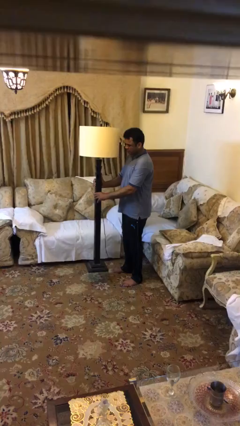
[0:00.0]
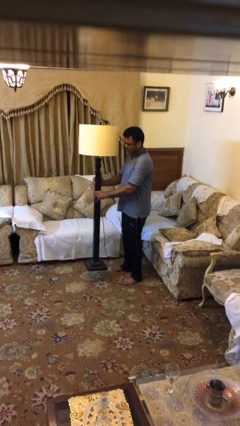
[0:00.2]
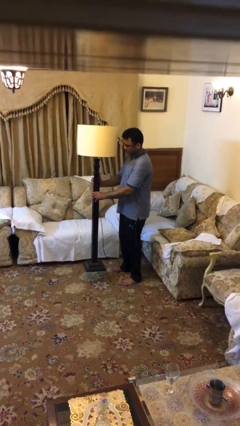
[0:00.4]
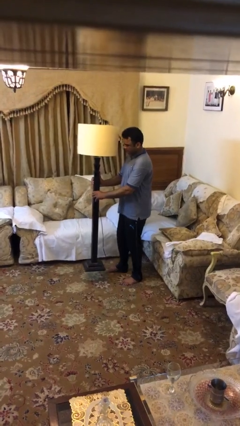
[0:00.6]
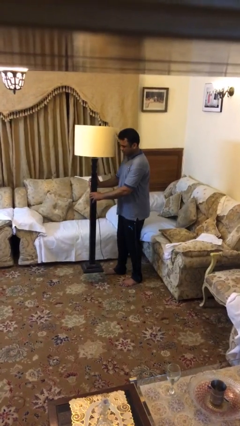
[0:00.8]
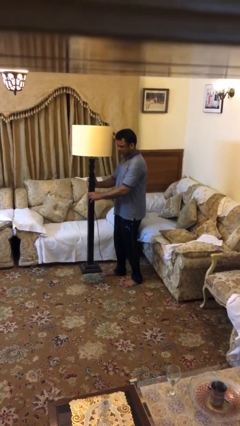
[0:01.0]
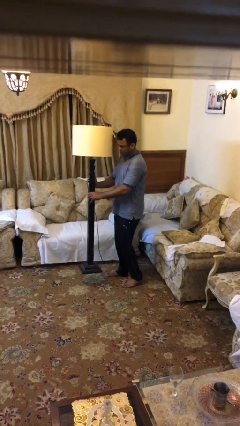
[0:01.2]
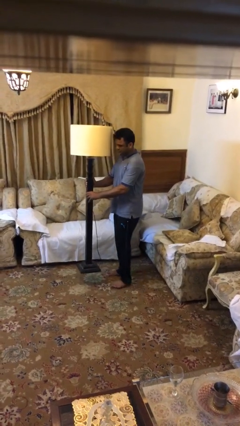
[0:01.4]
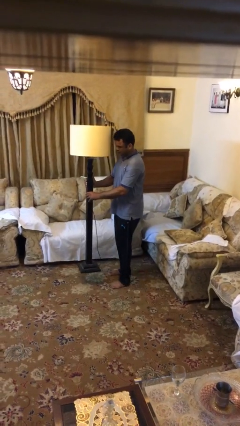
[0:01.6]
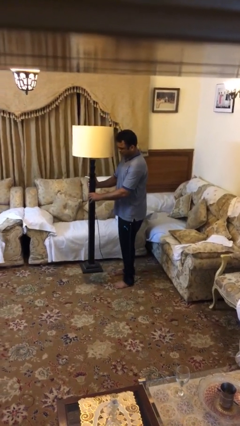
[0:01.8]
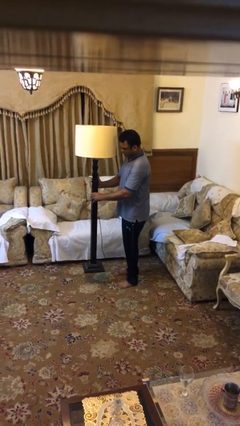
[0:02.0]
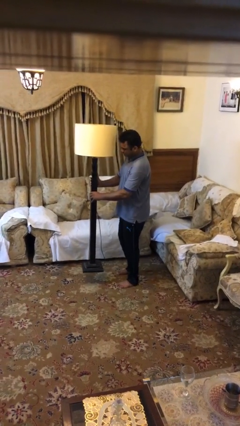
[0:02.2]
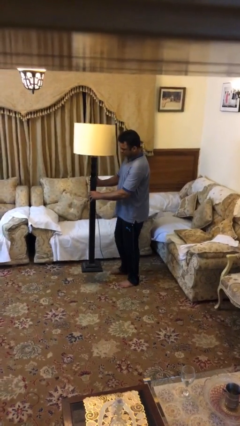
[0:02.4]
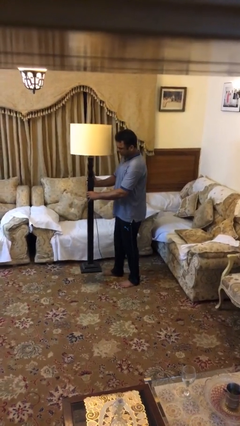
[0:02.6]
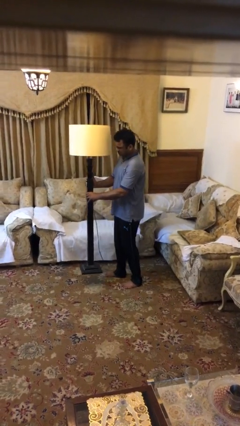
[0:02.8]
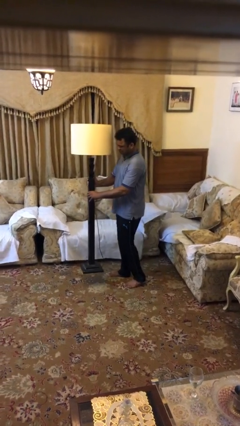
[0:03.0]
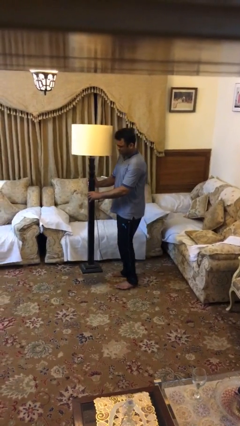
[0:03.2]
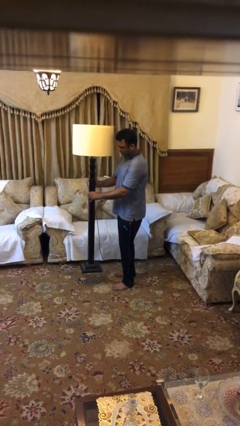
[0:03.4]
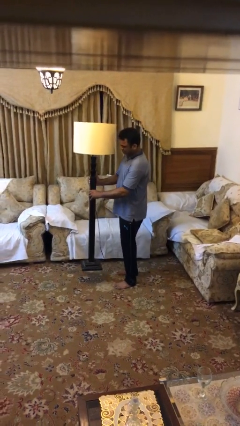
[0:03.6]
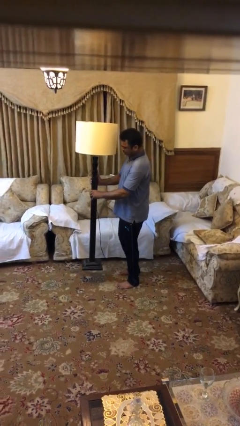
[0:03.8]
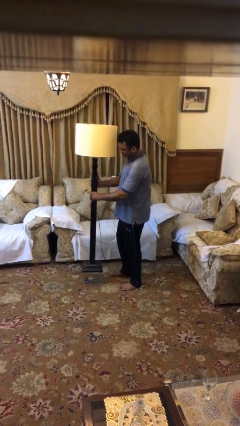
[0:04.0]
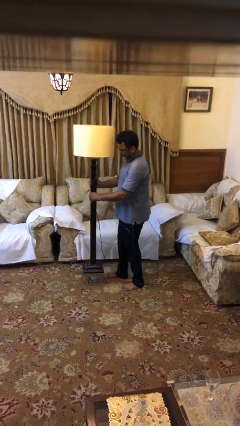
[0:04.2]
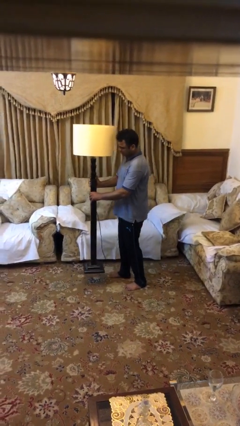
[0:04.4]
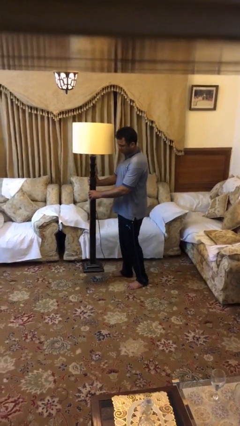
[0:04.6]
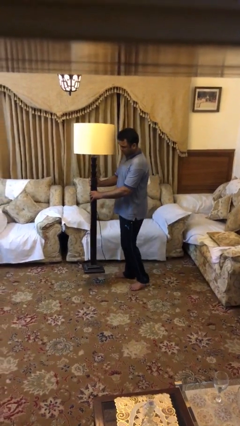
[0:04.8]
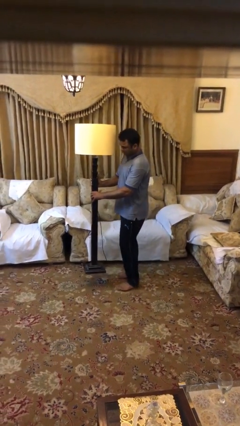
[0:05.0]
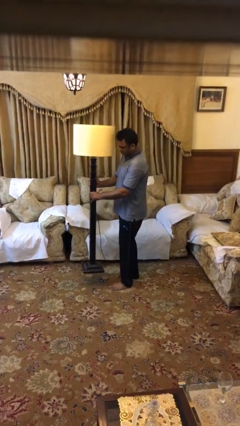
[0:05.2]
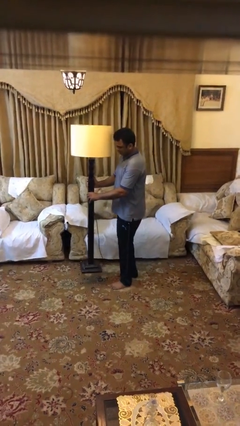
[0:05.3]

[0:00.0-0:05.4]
person carries heavy object

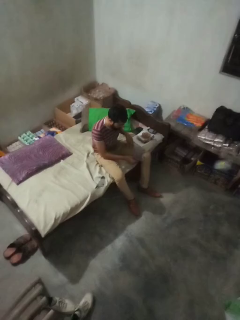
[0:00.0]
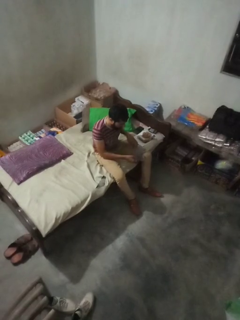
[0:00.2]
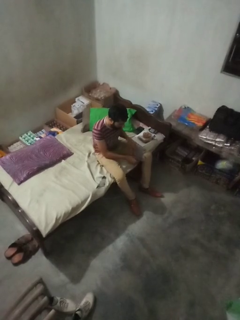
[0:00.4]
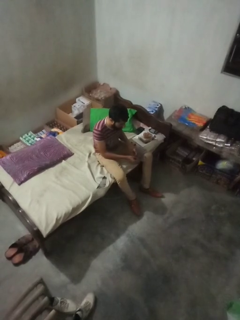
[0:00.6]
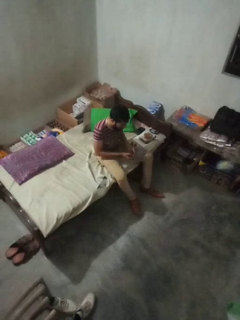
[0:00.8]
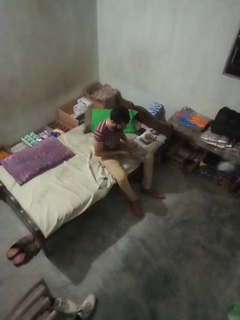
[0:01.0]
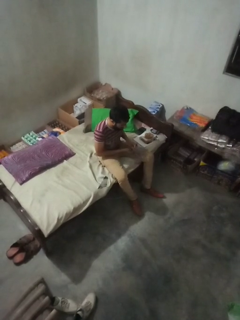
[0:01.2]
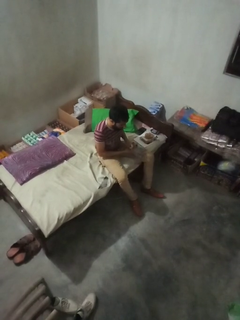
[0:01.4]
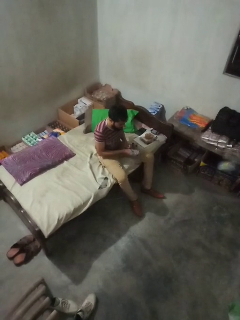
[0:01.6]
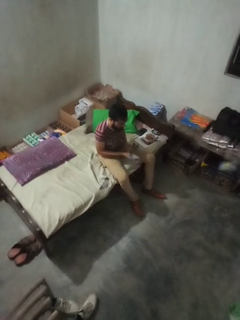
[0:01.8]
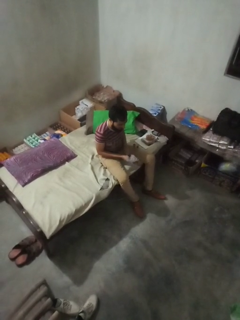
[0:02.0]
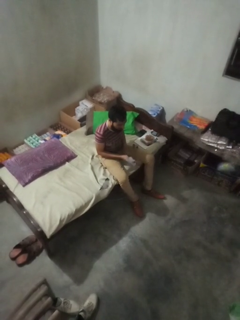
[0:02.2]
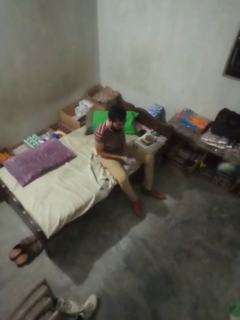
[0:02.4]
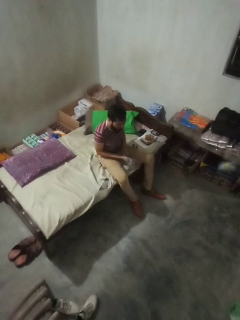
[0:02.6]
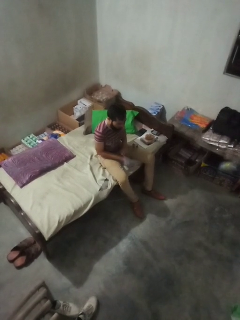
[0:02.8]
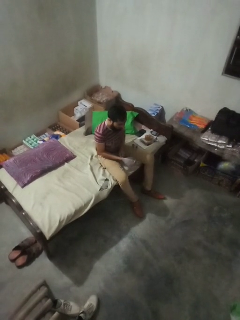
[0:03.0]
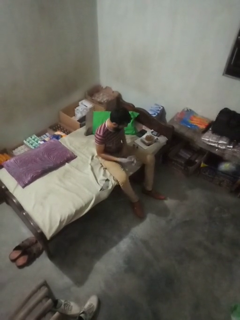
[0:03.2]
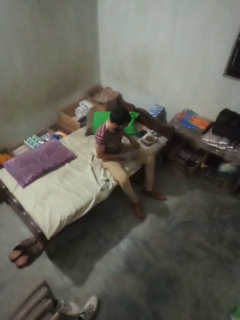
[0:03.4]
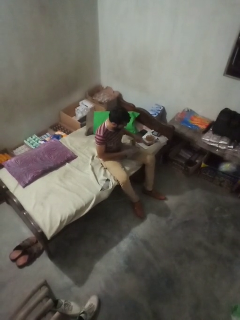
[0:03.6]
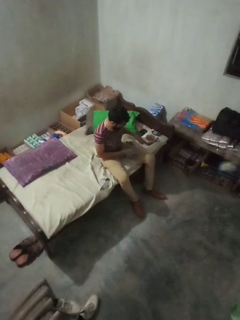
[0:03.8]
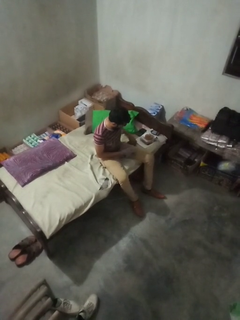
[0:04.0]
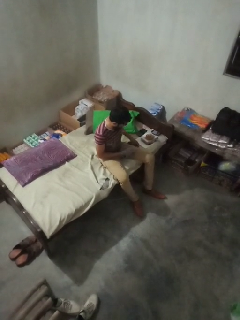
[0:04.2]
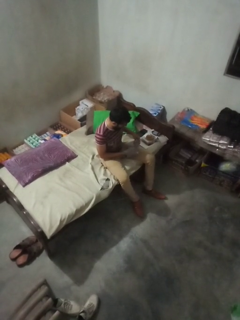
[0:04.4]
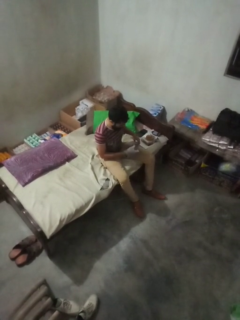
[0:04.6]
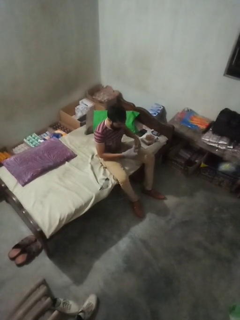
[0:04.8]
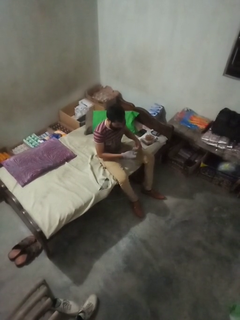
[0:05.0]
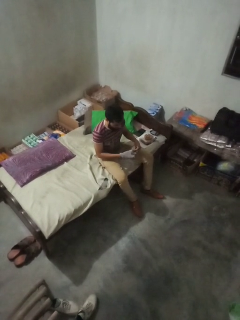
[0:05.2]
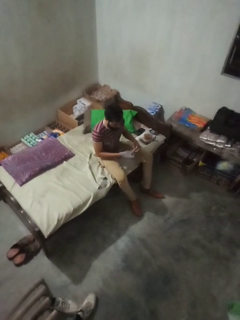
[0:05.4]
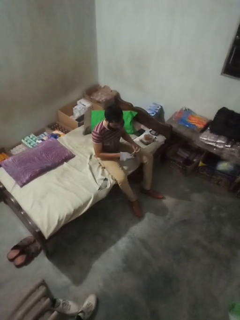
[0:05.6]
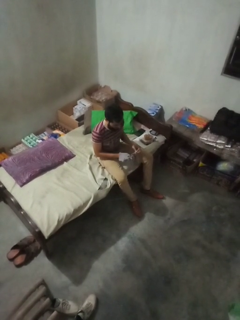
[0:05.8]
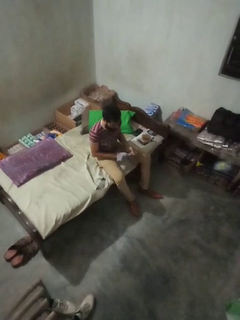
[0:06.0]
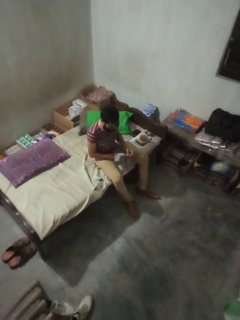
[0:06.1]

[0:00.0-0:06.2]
person puts on gloves

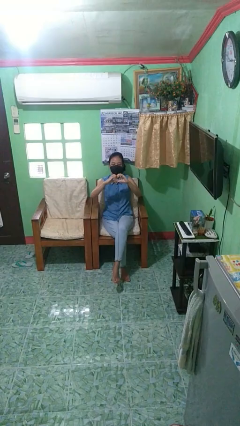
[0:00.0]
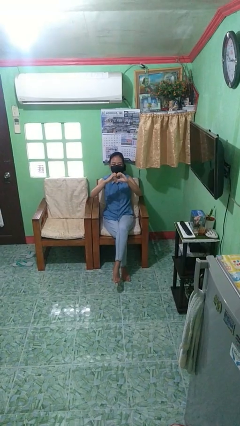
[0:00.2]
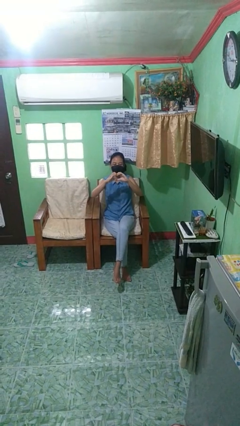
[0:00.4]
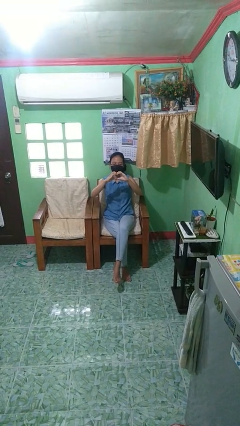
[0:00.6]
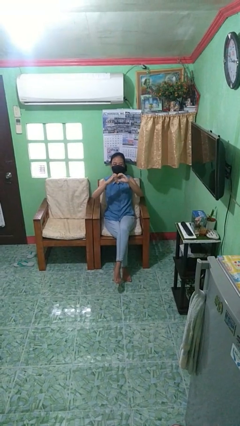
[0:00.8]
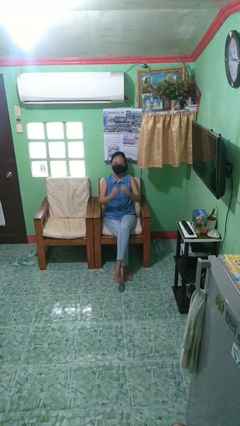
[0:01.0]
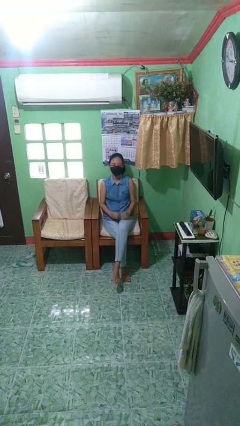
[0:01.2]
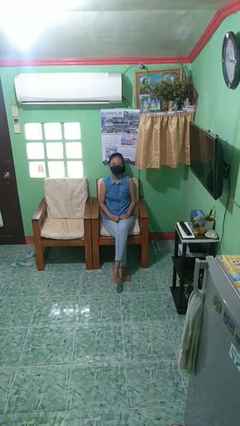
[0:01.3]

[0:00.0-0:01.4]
person gestures heart

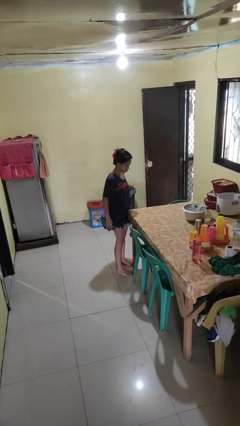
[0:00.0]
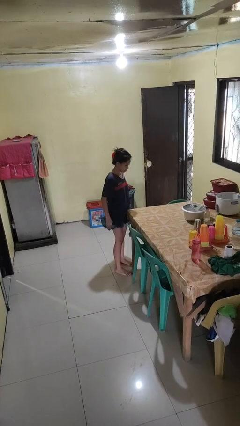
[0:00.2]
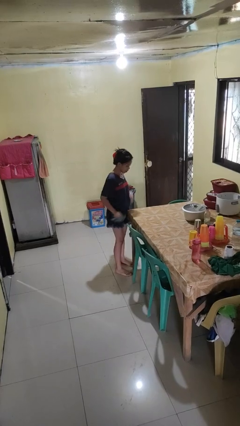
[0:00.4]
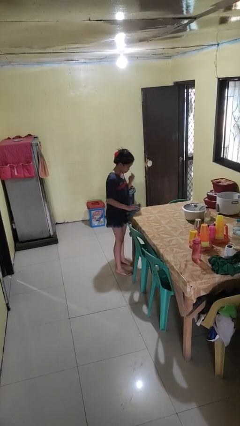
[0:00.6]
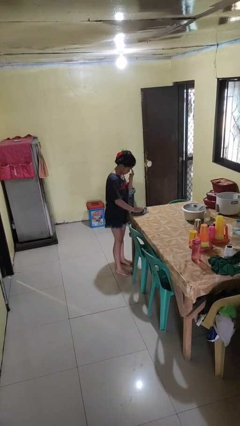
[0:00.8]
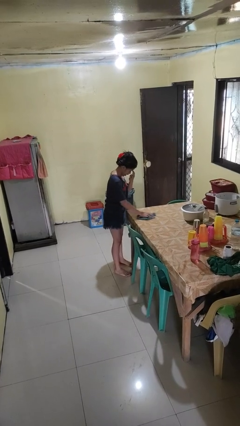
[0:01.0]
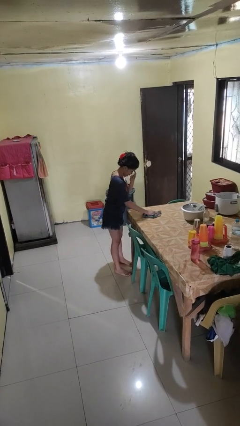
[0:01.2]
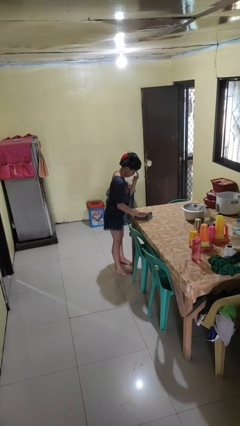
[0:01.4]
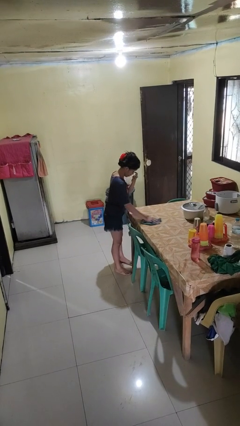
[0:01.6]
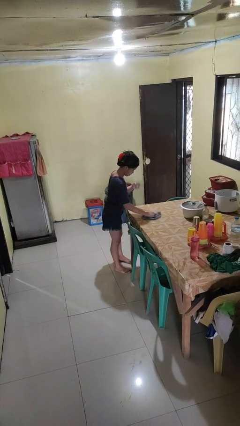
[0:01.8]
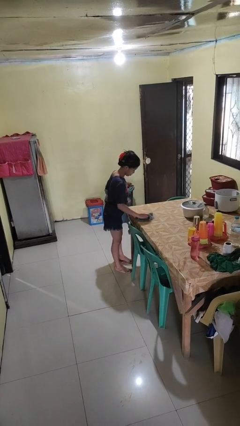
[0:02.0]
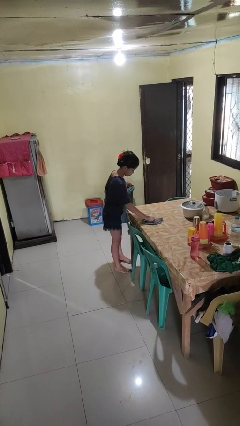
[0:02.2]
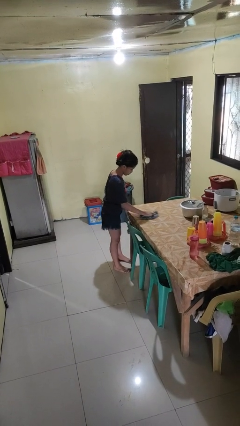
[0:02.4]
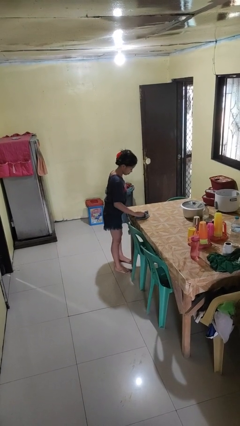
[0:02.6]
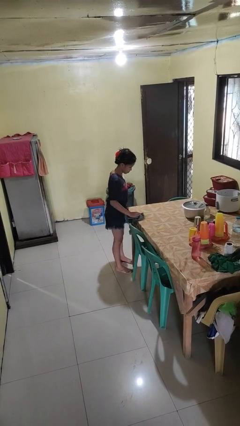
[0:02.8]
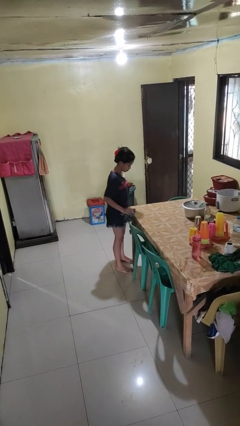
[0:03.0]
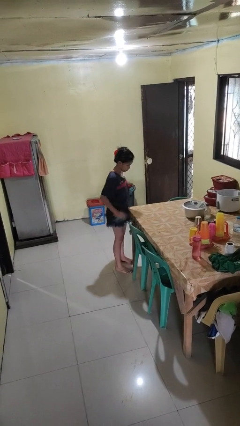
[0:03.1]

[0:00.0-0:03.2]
person cleans table with rag

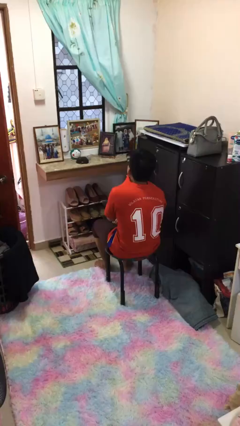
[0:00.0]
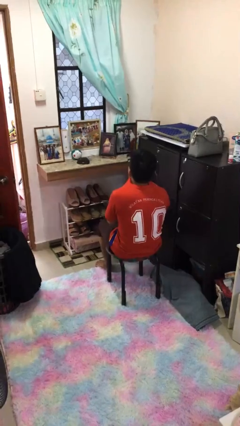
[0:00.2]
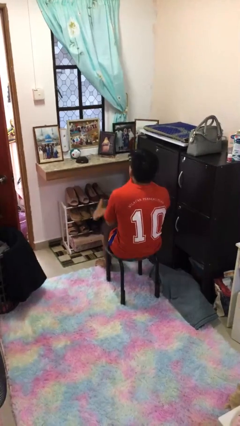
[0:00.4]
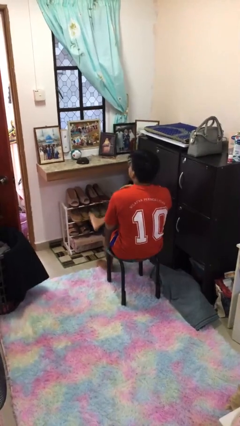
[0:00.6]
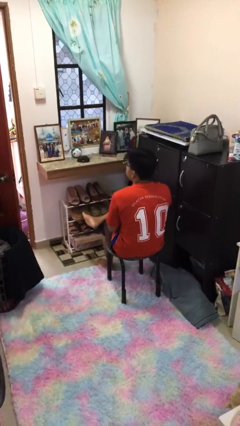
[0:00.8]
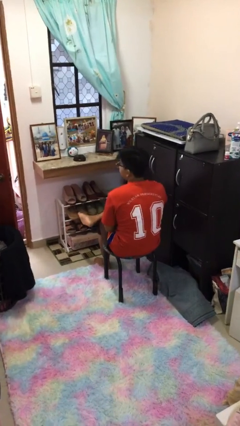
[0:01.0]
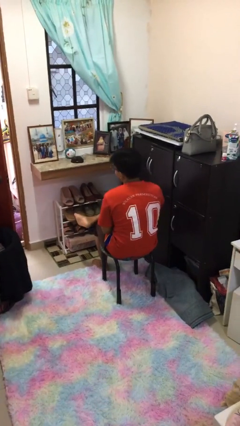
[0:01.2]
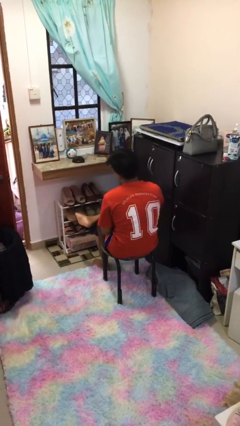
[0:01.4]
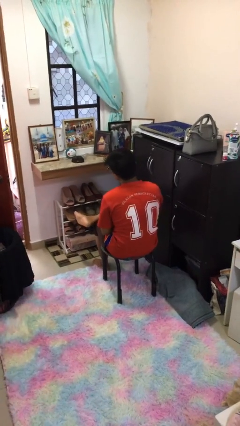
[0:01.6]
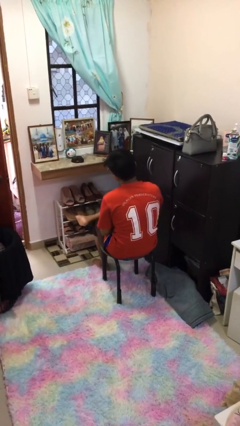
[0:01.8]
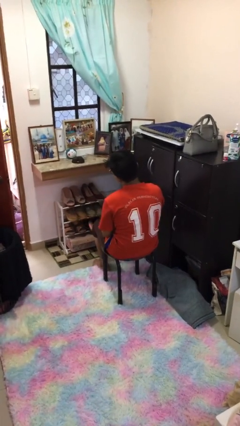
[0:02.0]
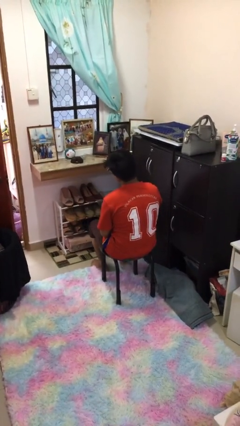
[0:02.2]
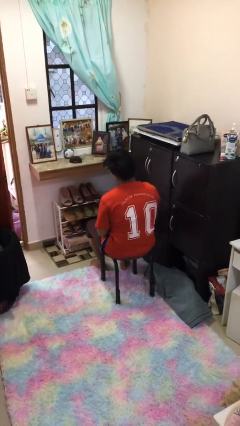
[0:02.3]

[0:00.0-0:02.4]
person crosses legs

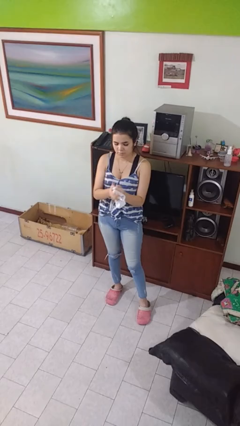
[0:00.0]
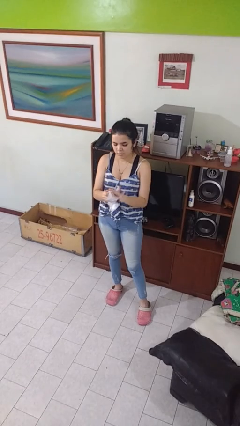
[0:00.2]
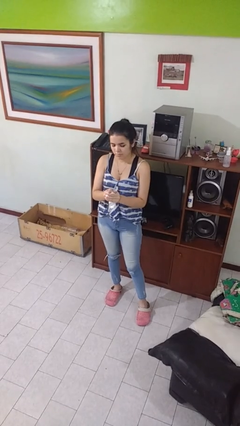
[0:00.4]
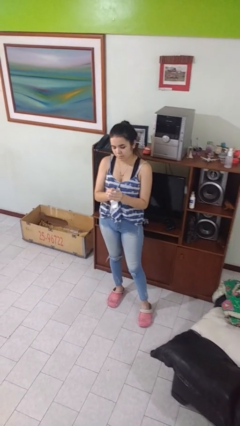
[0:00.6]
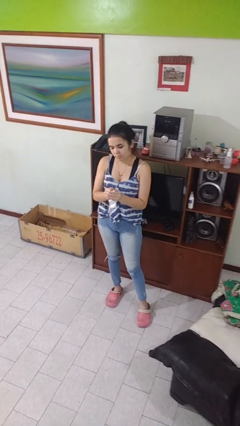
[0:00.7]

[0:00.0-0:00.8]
person crumples paper
